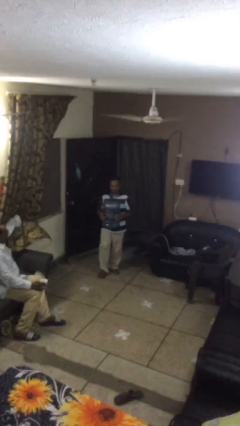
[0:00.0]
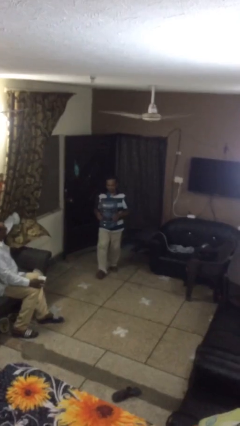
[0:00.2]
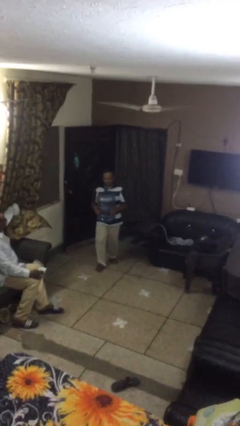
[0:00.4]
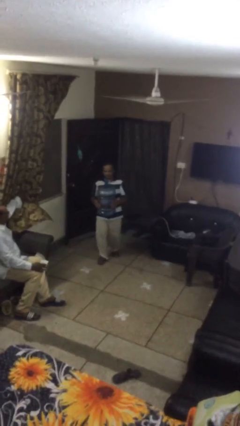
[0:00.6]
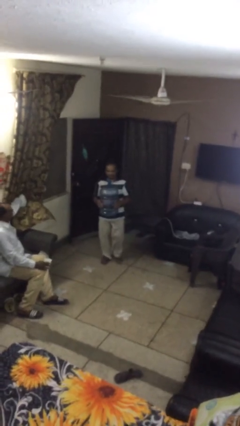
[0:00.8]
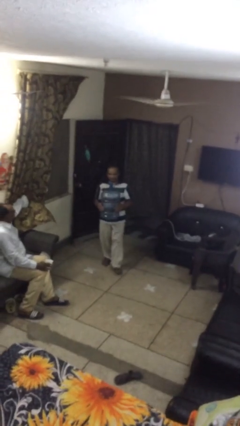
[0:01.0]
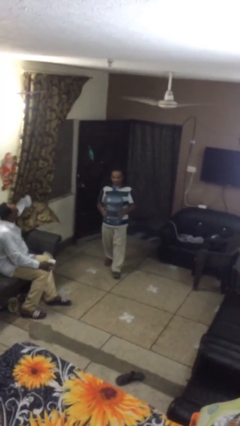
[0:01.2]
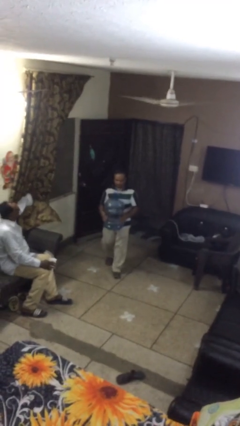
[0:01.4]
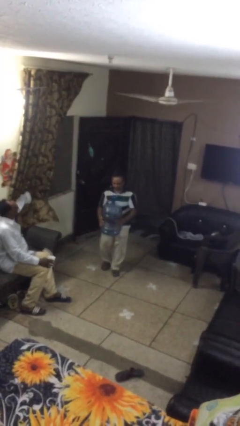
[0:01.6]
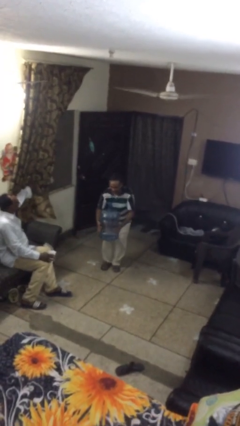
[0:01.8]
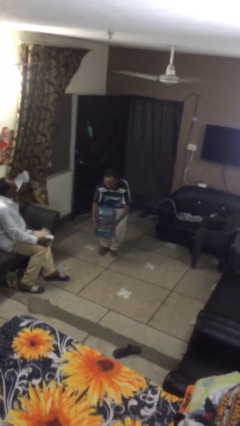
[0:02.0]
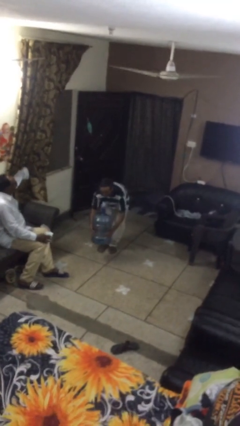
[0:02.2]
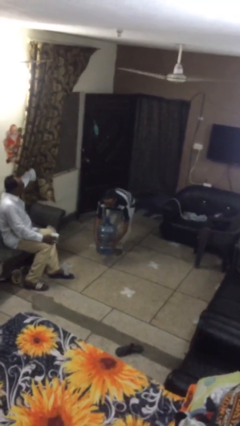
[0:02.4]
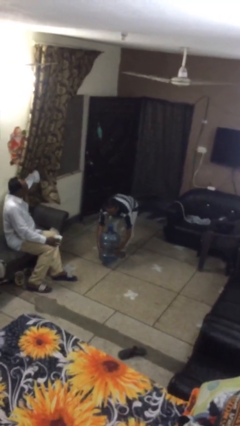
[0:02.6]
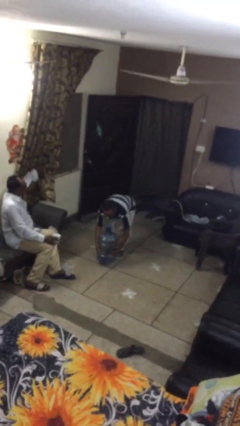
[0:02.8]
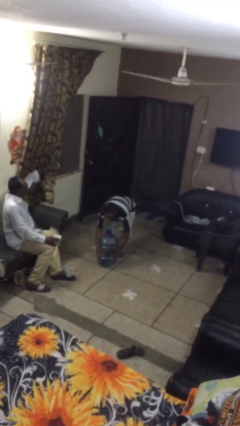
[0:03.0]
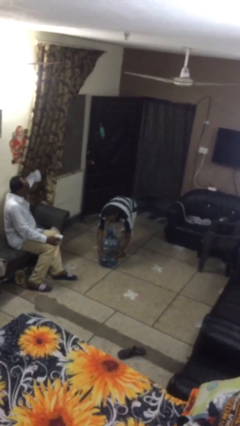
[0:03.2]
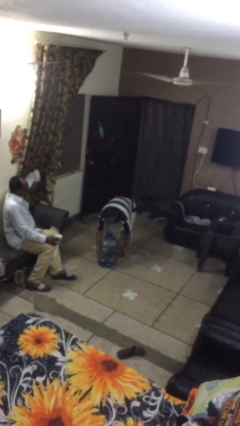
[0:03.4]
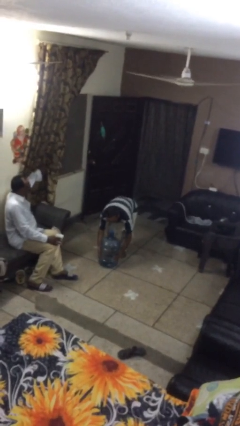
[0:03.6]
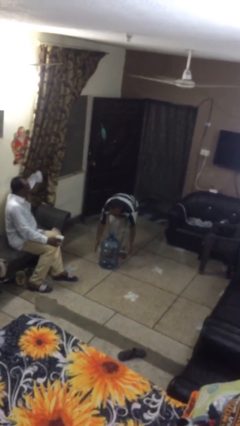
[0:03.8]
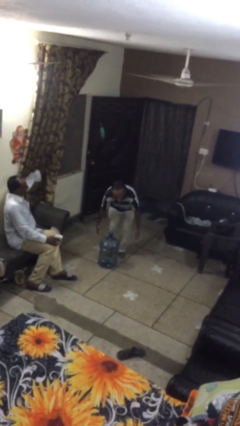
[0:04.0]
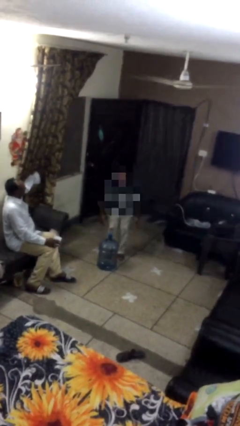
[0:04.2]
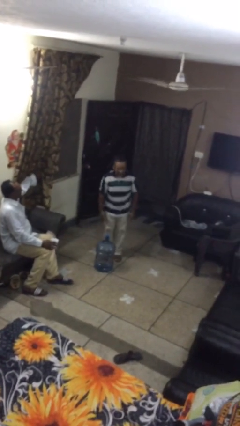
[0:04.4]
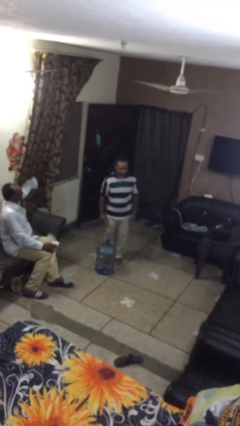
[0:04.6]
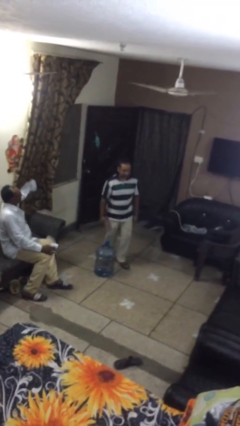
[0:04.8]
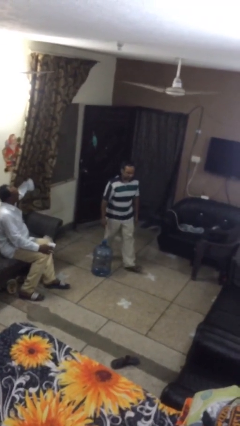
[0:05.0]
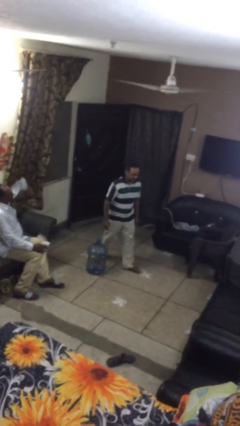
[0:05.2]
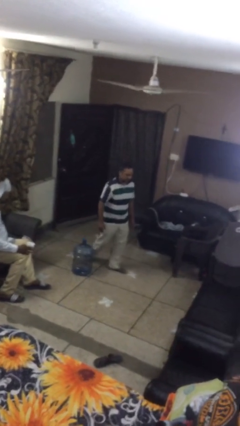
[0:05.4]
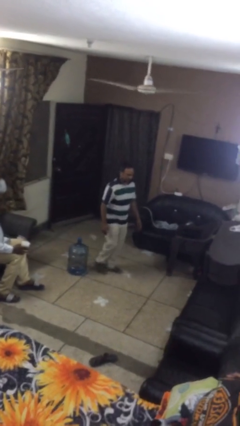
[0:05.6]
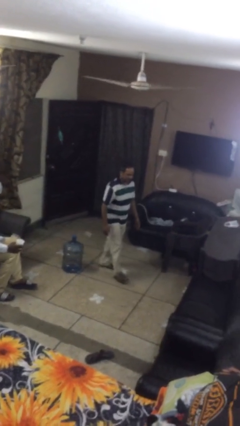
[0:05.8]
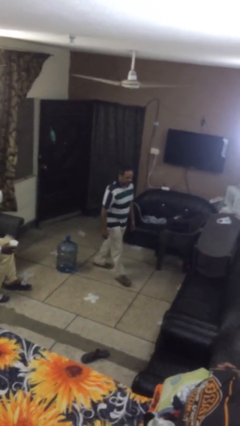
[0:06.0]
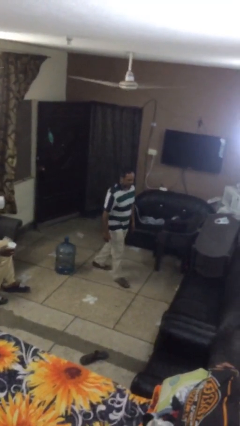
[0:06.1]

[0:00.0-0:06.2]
person puts down object on floor

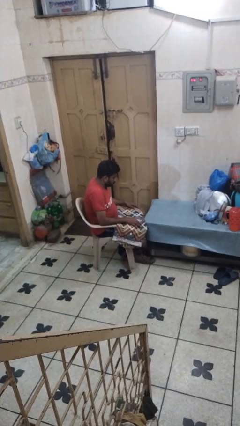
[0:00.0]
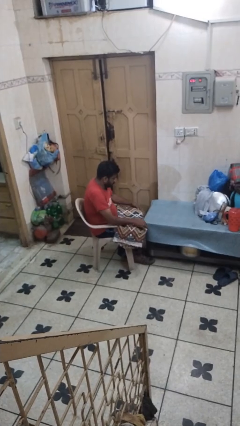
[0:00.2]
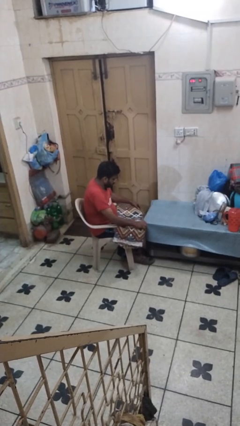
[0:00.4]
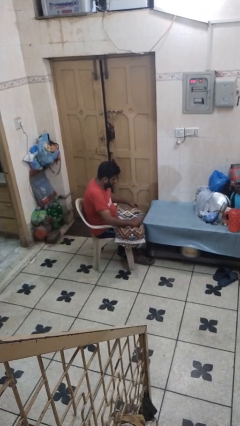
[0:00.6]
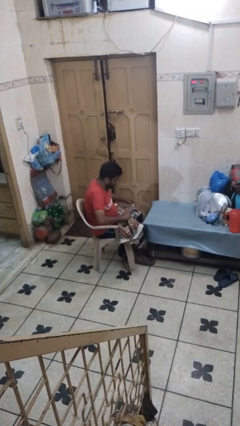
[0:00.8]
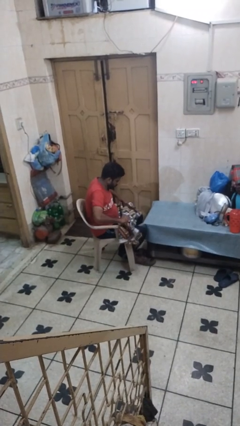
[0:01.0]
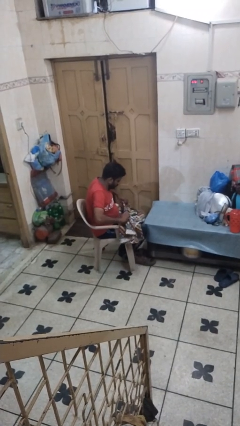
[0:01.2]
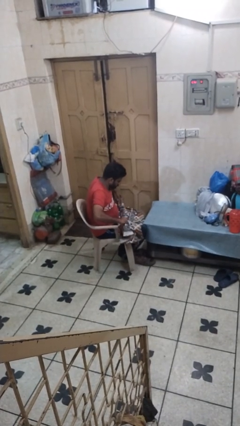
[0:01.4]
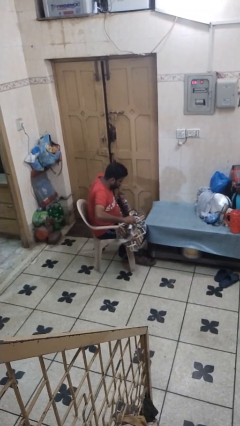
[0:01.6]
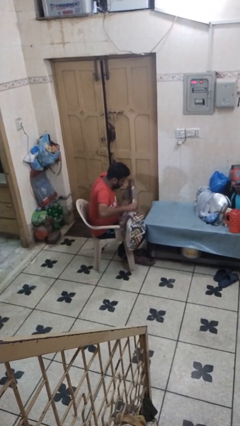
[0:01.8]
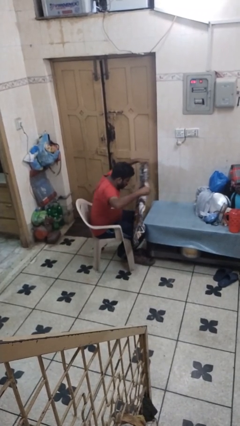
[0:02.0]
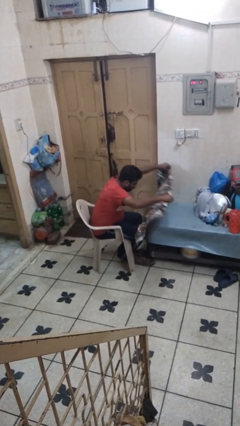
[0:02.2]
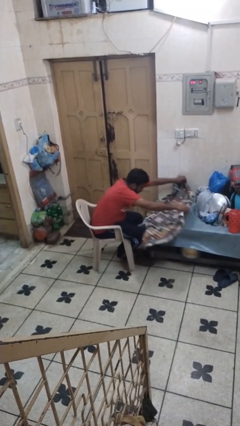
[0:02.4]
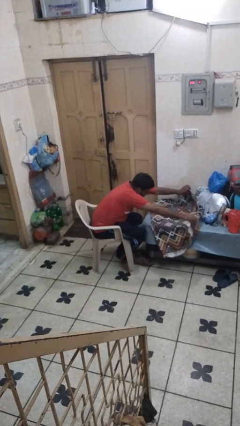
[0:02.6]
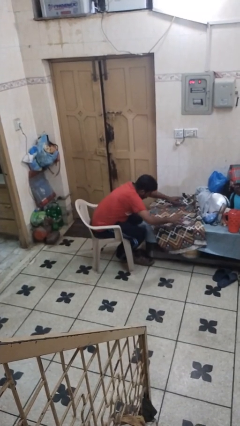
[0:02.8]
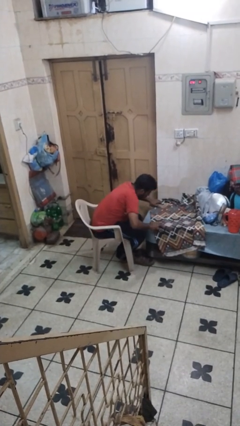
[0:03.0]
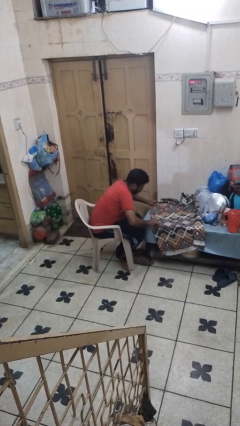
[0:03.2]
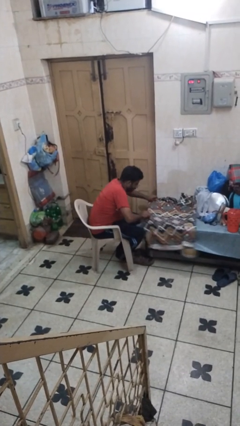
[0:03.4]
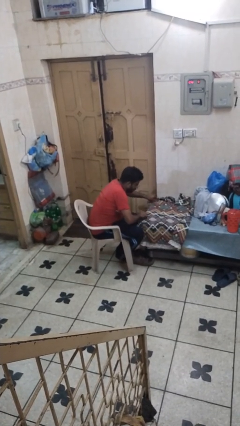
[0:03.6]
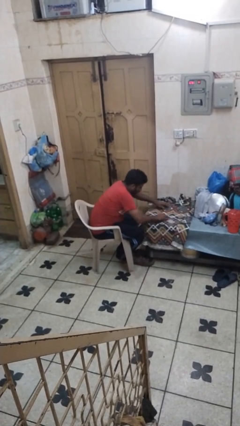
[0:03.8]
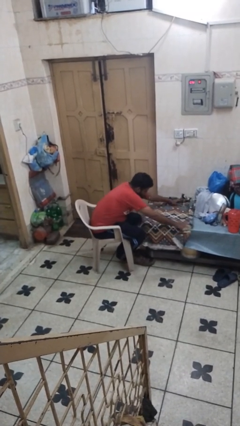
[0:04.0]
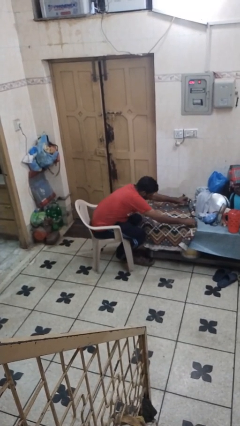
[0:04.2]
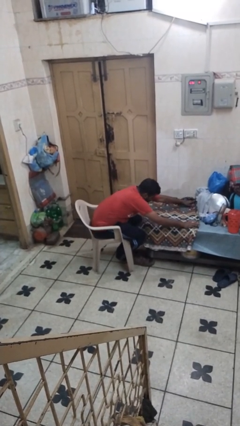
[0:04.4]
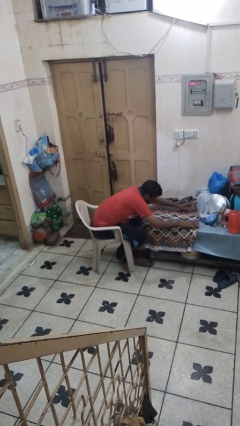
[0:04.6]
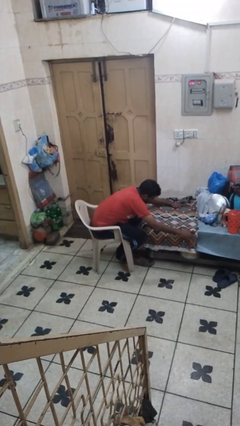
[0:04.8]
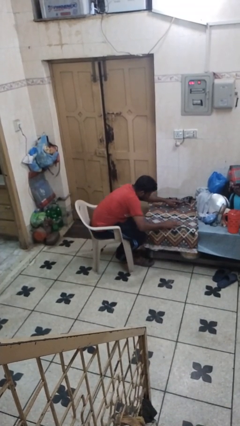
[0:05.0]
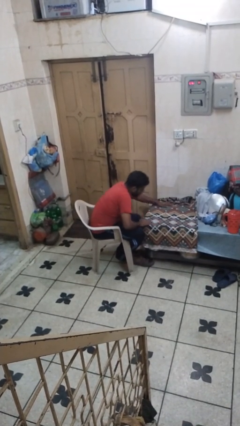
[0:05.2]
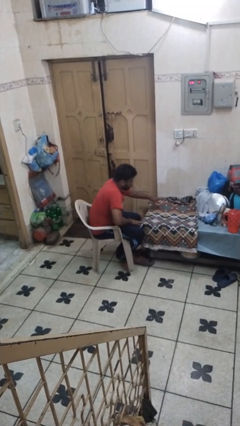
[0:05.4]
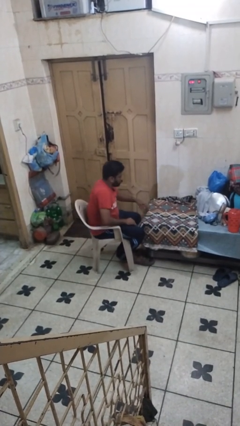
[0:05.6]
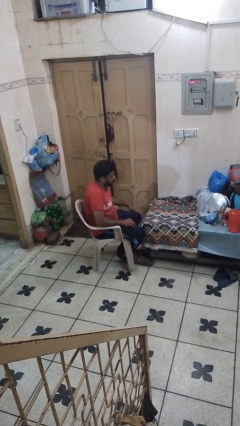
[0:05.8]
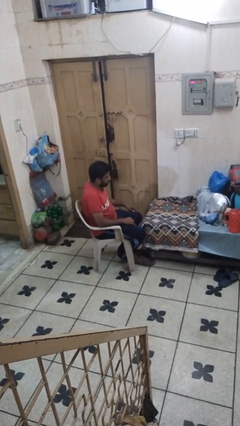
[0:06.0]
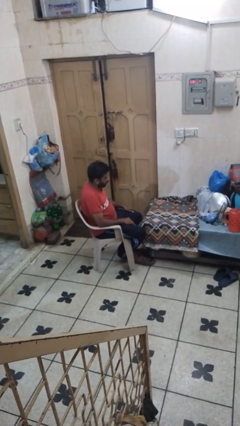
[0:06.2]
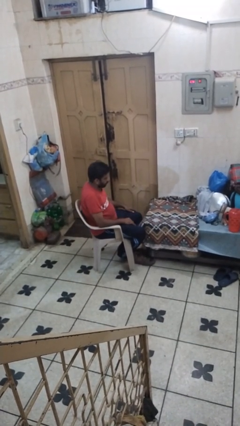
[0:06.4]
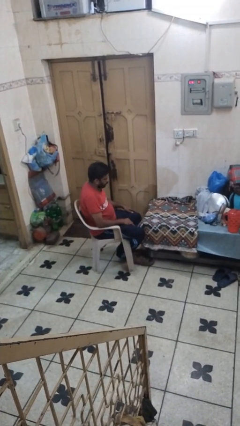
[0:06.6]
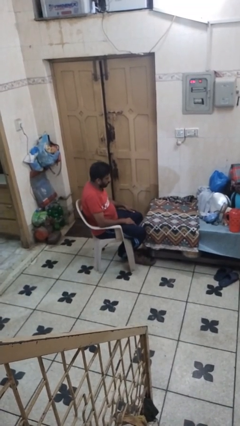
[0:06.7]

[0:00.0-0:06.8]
person spreads tablecloth

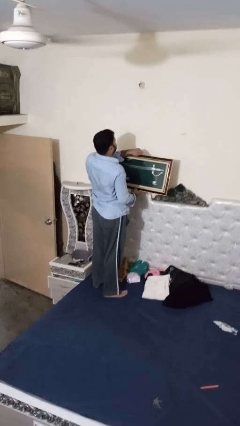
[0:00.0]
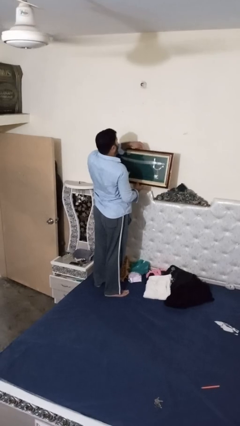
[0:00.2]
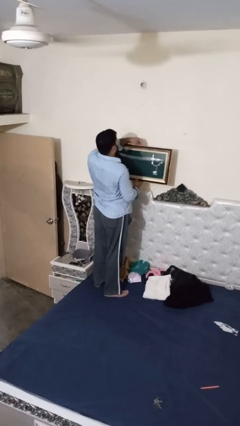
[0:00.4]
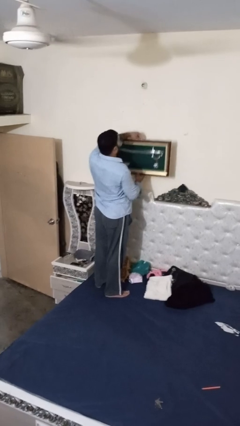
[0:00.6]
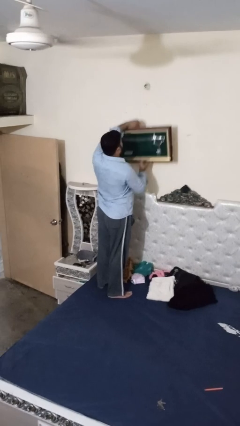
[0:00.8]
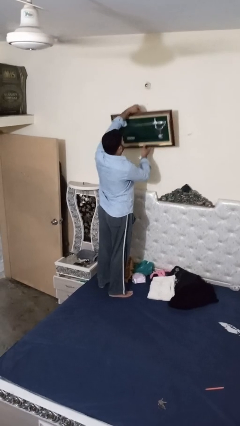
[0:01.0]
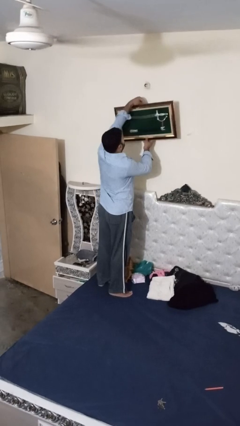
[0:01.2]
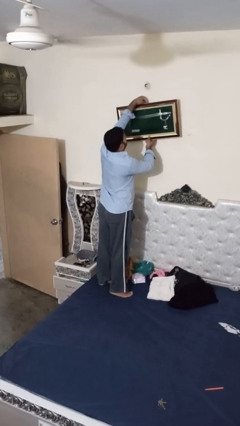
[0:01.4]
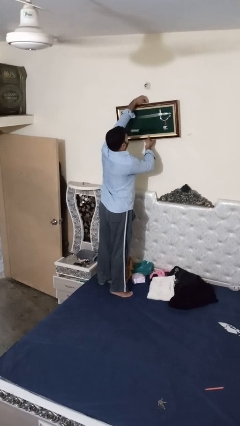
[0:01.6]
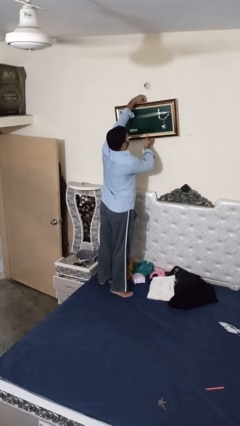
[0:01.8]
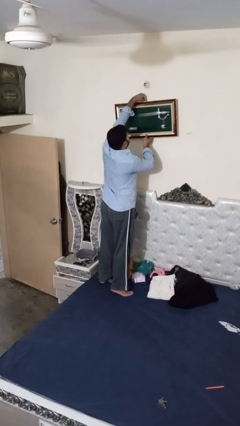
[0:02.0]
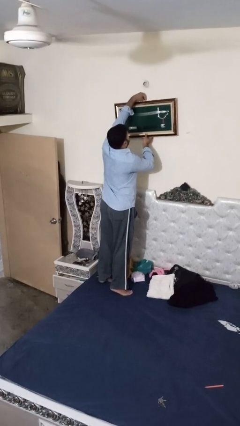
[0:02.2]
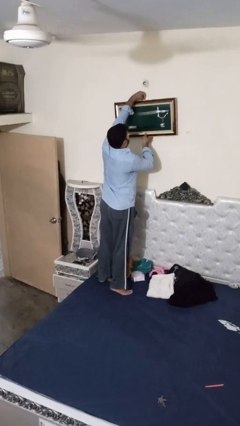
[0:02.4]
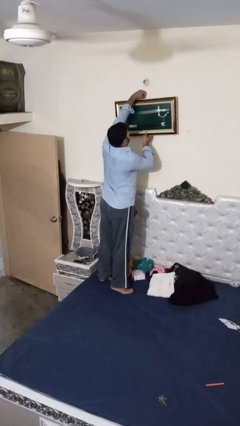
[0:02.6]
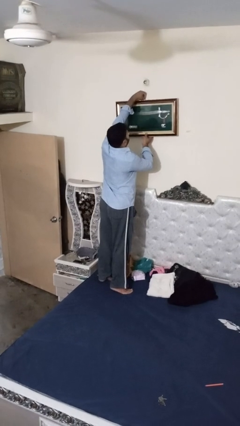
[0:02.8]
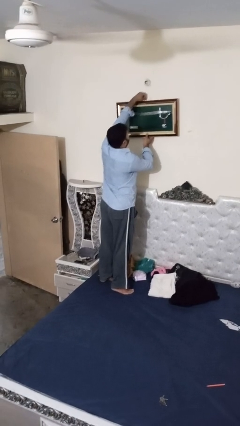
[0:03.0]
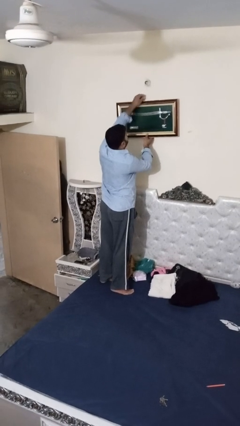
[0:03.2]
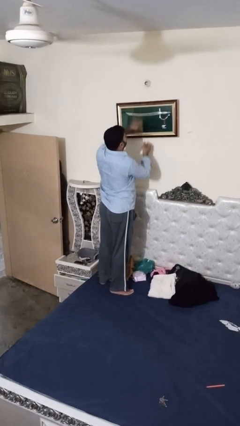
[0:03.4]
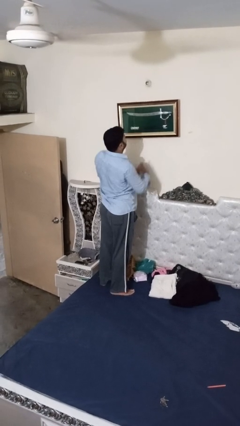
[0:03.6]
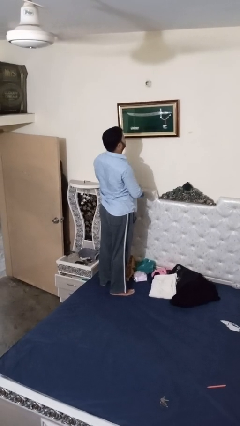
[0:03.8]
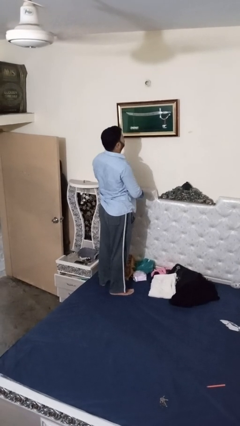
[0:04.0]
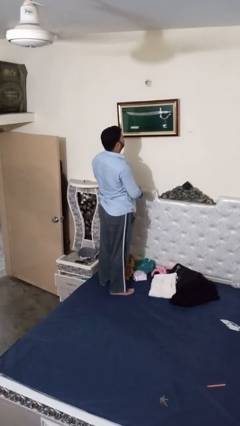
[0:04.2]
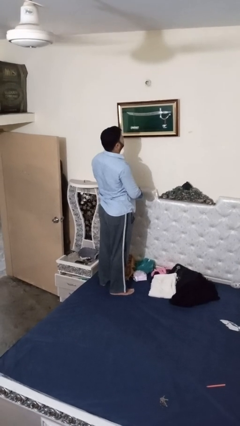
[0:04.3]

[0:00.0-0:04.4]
person puts up picture frame
